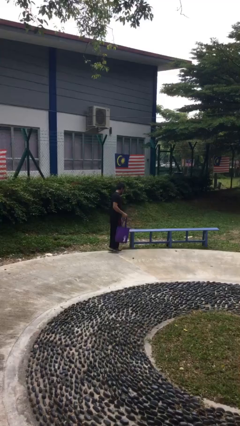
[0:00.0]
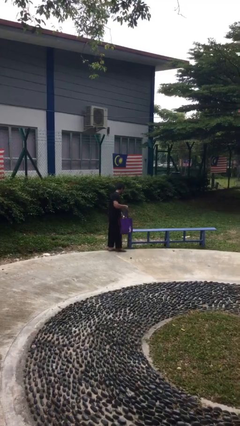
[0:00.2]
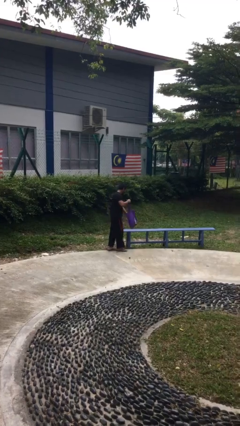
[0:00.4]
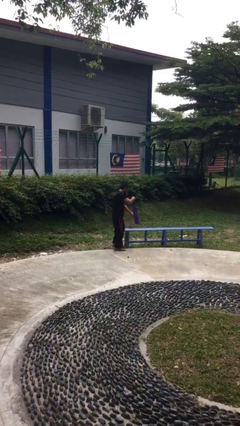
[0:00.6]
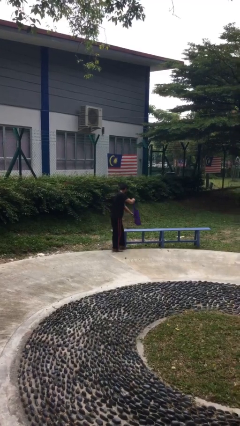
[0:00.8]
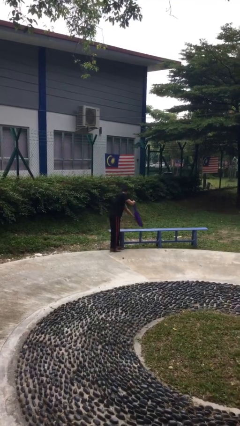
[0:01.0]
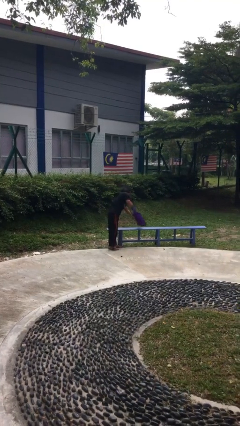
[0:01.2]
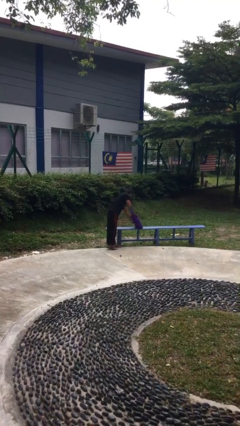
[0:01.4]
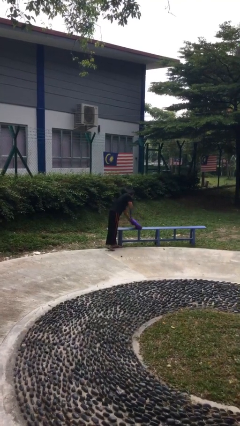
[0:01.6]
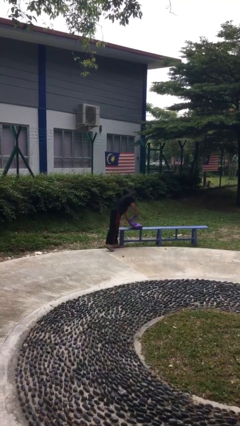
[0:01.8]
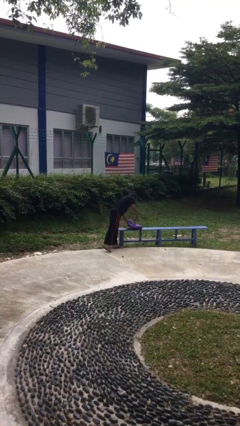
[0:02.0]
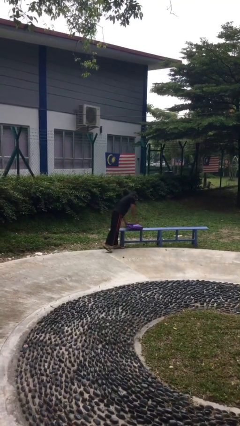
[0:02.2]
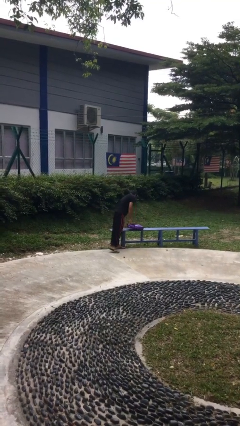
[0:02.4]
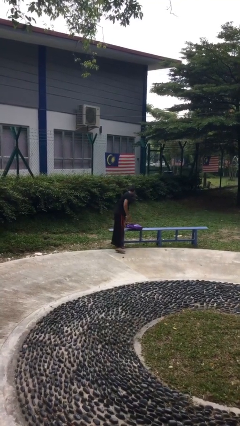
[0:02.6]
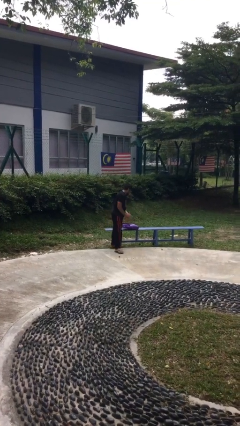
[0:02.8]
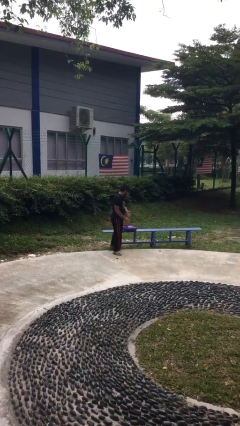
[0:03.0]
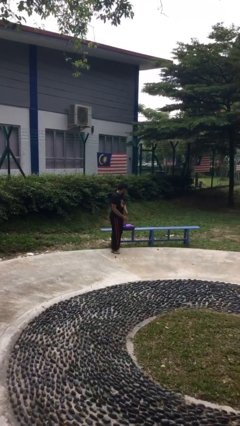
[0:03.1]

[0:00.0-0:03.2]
person puts down object on table

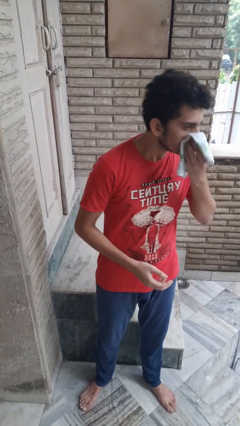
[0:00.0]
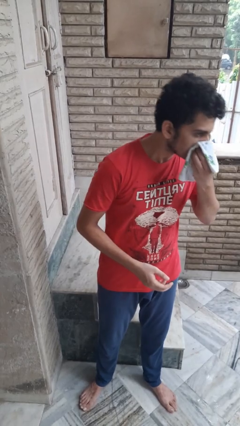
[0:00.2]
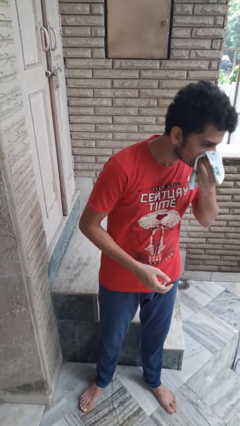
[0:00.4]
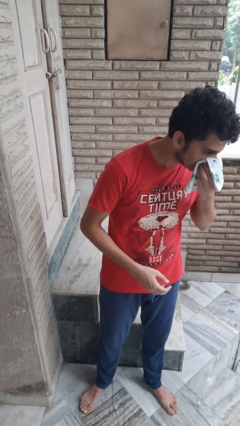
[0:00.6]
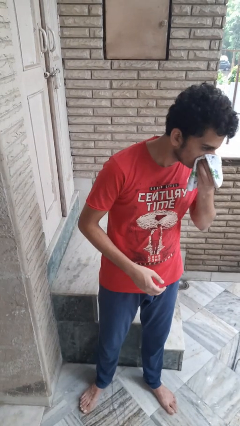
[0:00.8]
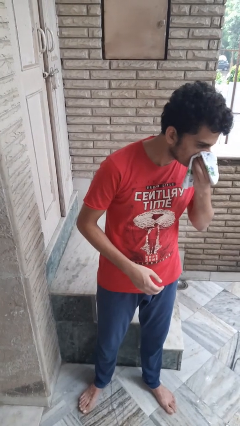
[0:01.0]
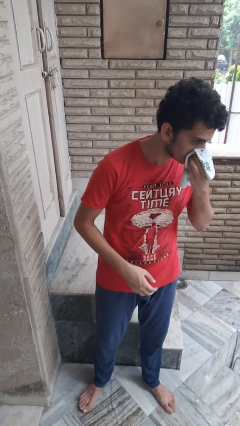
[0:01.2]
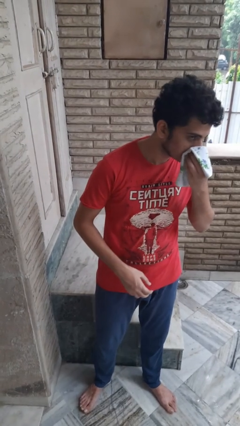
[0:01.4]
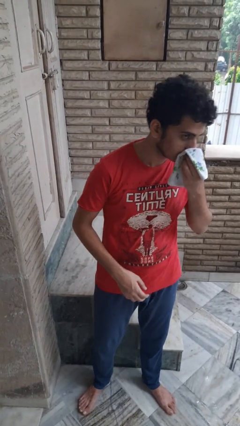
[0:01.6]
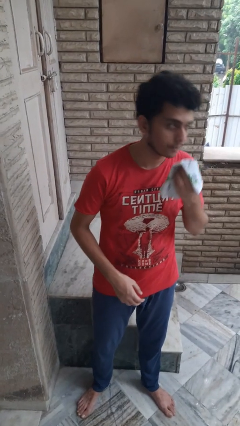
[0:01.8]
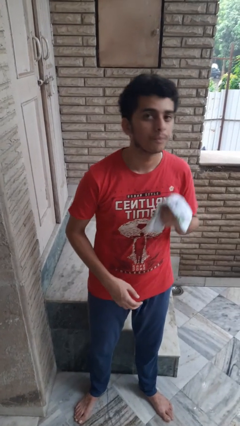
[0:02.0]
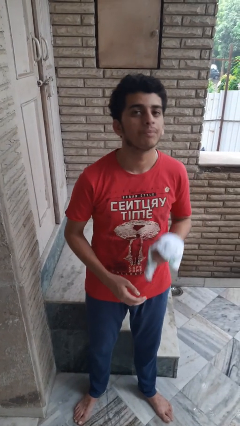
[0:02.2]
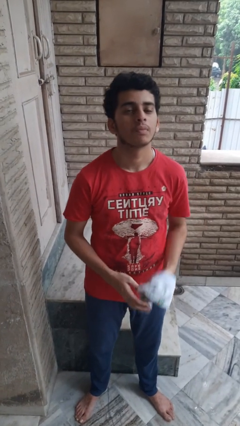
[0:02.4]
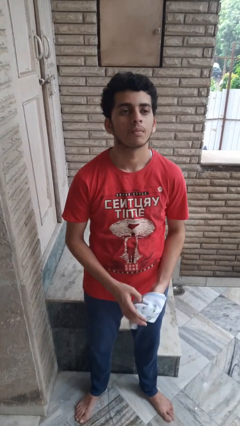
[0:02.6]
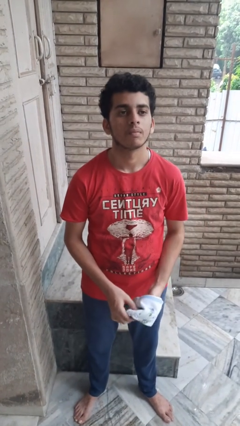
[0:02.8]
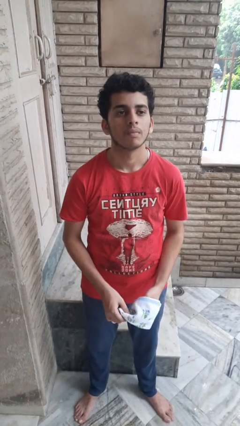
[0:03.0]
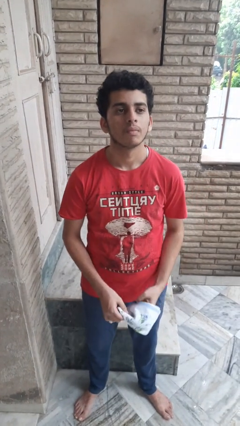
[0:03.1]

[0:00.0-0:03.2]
person blows nose

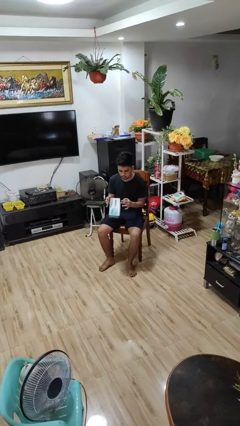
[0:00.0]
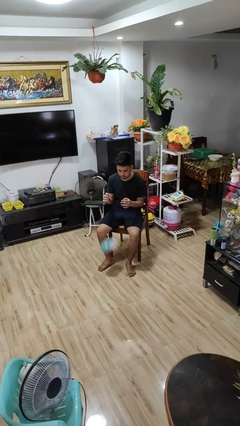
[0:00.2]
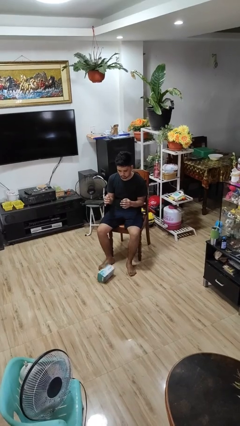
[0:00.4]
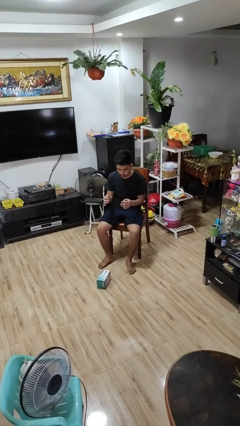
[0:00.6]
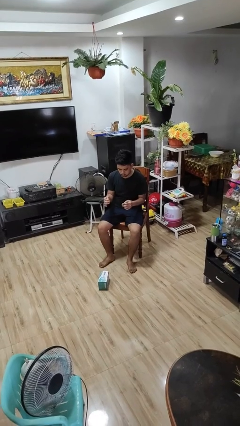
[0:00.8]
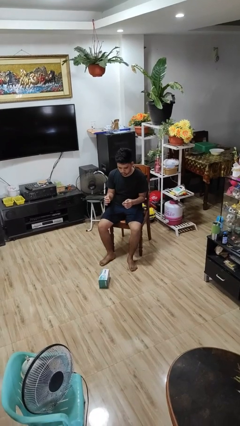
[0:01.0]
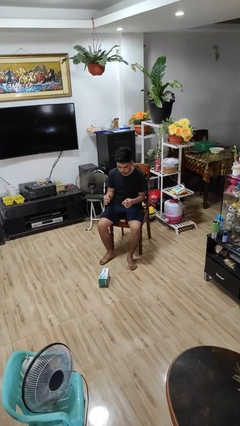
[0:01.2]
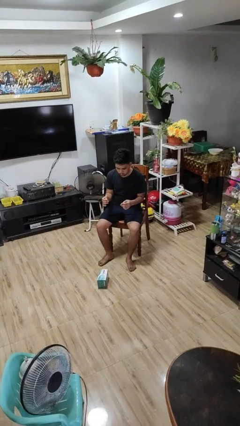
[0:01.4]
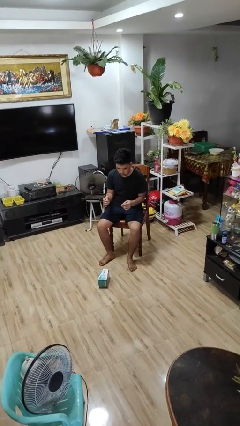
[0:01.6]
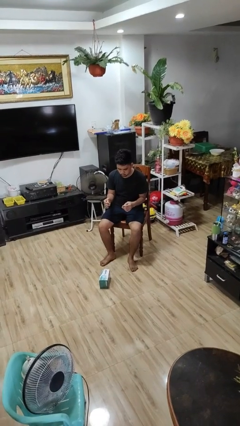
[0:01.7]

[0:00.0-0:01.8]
person drops object

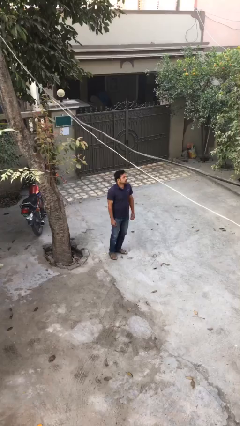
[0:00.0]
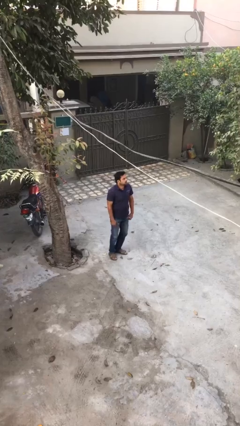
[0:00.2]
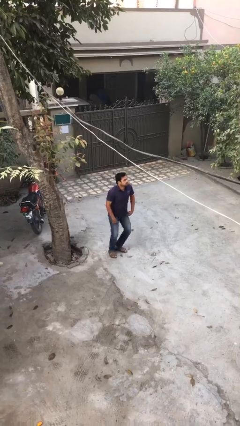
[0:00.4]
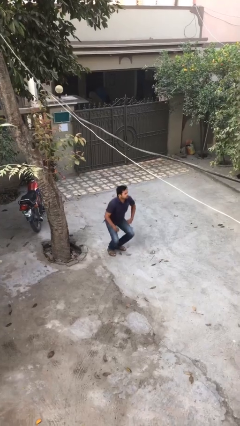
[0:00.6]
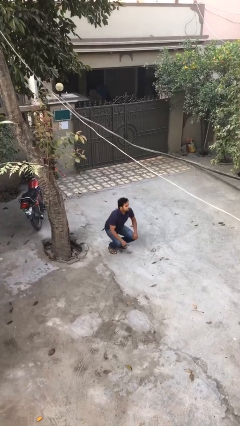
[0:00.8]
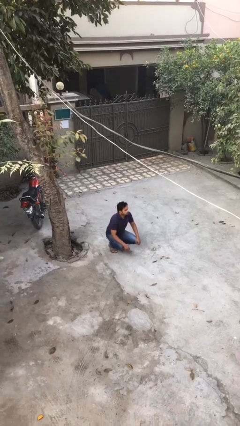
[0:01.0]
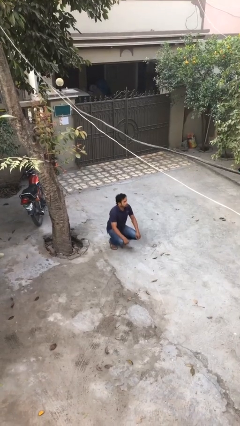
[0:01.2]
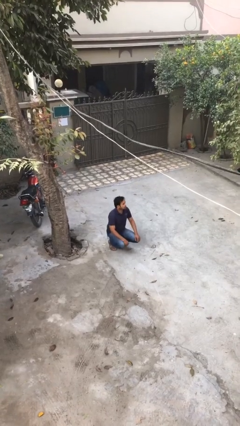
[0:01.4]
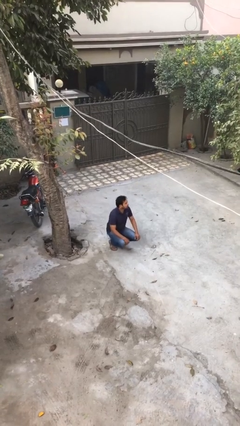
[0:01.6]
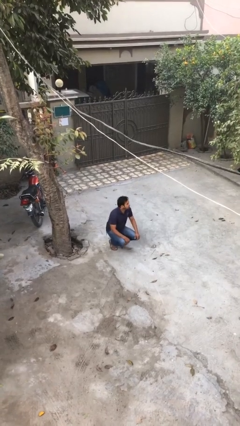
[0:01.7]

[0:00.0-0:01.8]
person sits down

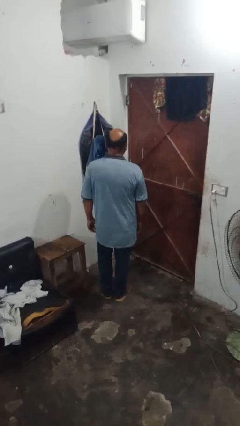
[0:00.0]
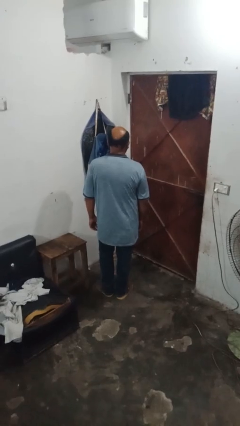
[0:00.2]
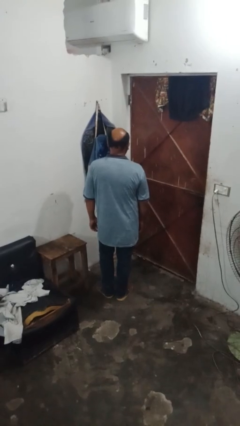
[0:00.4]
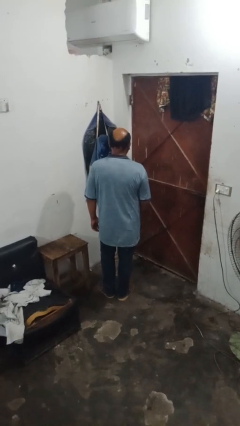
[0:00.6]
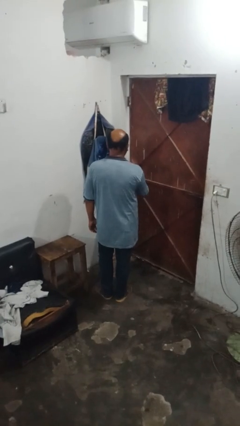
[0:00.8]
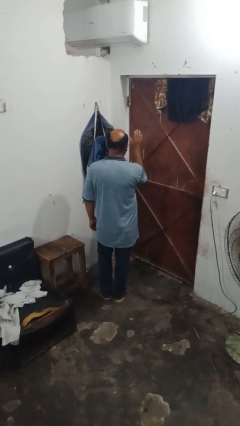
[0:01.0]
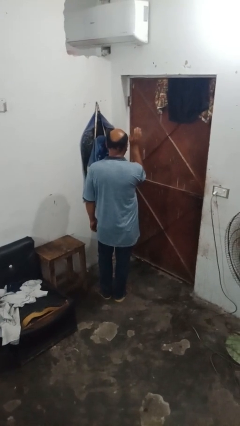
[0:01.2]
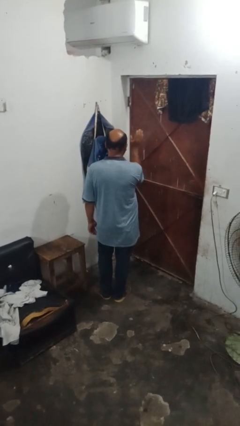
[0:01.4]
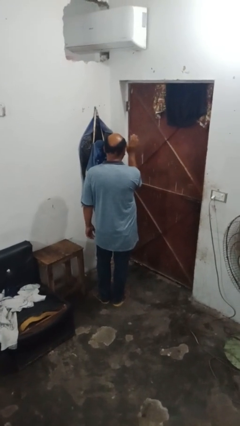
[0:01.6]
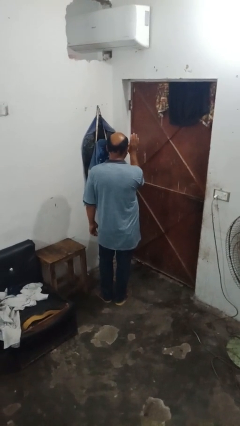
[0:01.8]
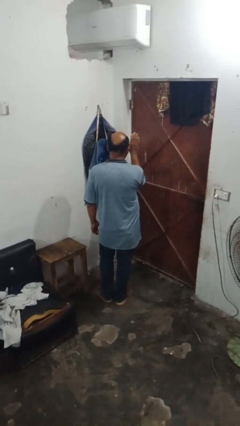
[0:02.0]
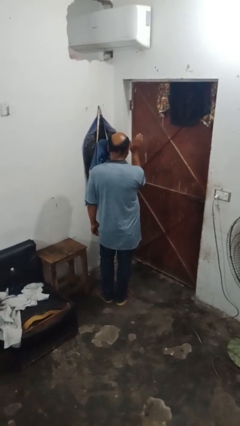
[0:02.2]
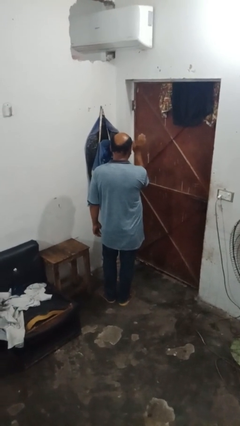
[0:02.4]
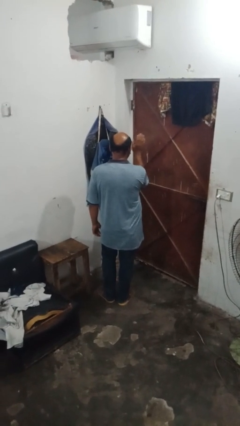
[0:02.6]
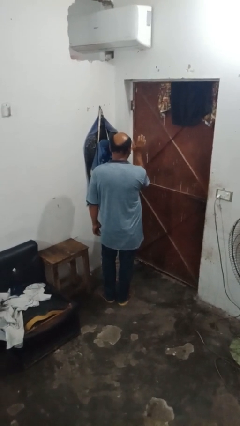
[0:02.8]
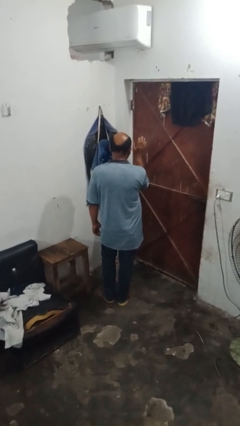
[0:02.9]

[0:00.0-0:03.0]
person waves hand over object

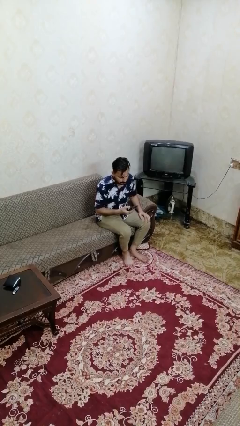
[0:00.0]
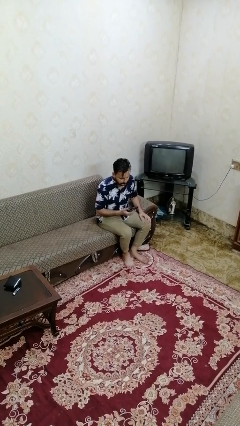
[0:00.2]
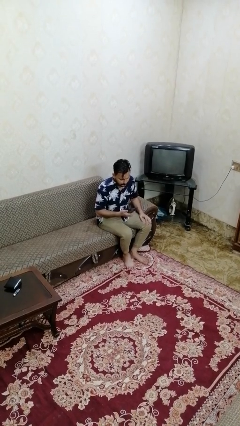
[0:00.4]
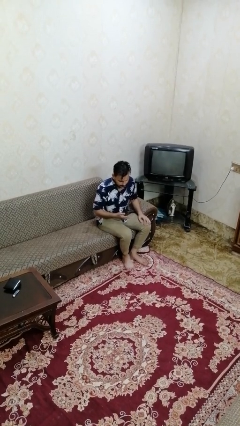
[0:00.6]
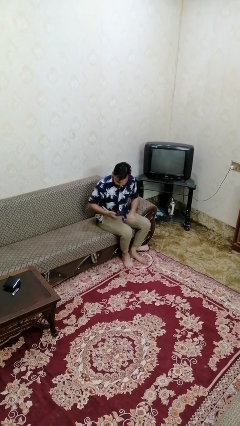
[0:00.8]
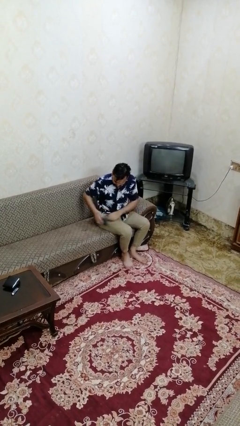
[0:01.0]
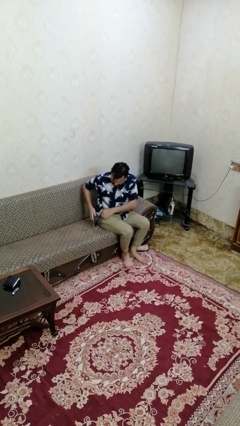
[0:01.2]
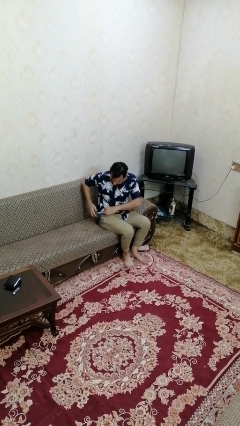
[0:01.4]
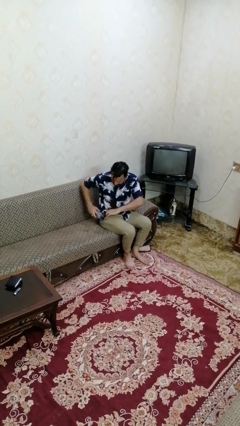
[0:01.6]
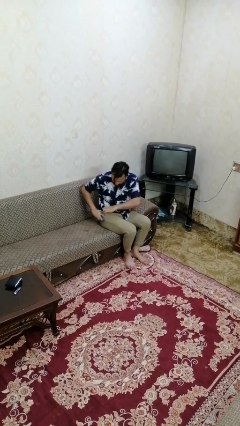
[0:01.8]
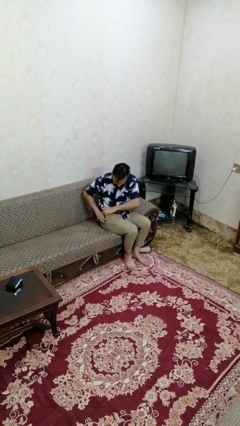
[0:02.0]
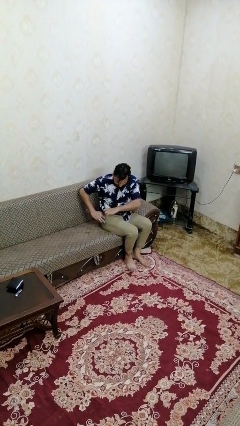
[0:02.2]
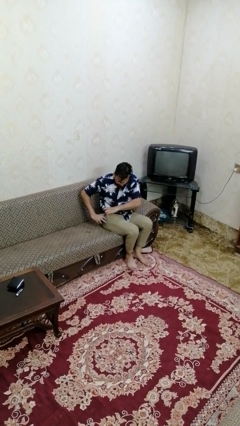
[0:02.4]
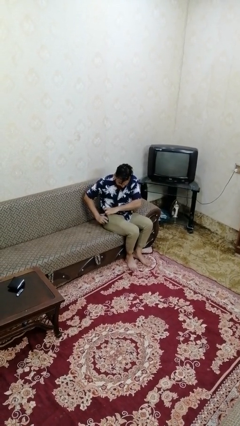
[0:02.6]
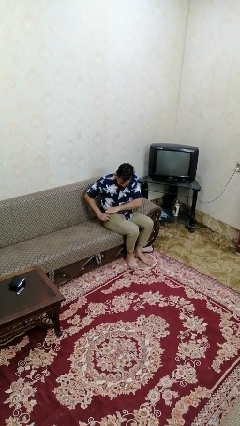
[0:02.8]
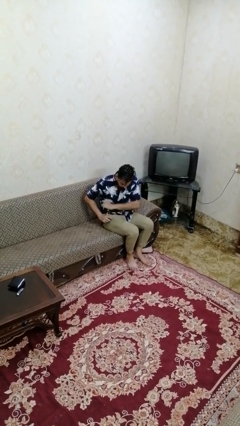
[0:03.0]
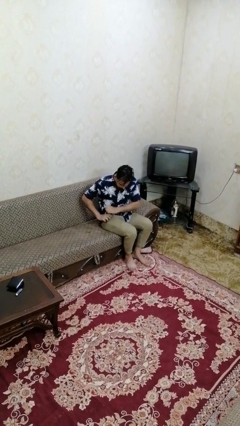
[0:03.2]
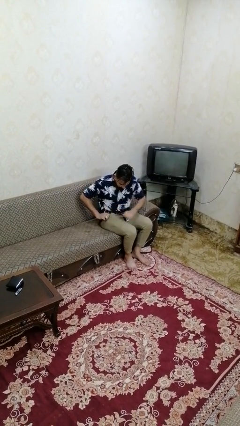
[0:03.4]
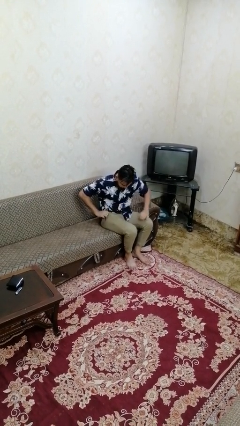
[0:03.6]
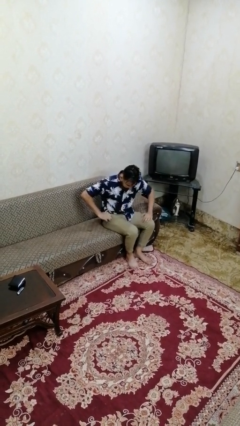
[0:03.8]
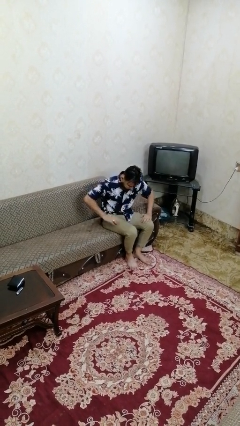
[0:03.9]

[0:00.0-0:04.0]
person puts phone into pocket
